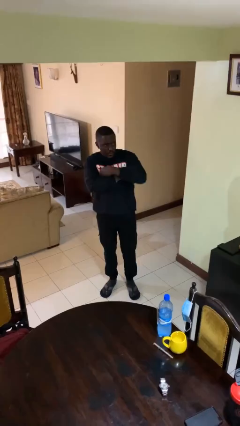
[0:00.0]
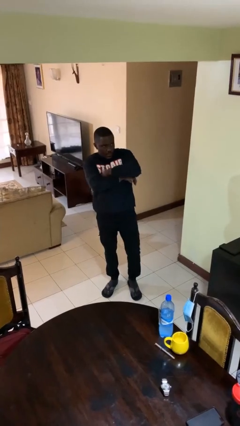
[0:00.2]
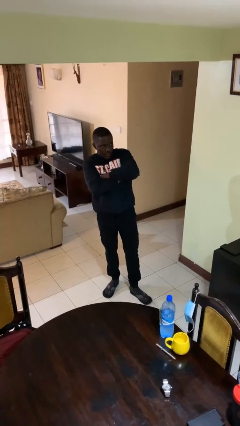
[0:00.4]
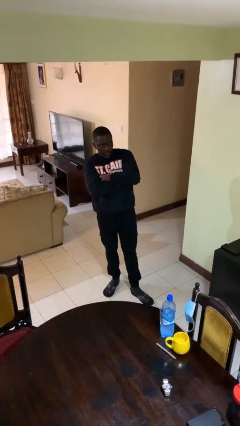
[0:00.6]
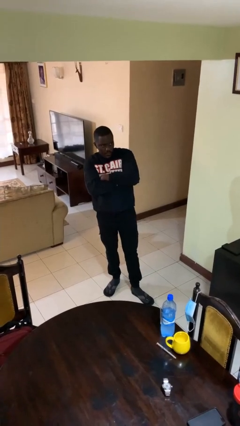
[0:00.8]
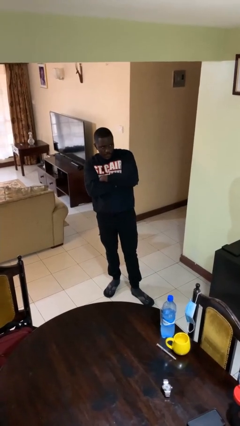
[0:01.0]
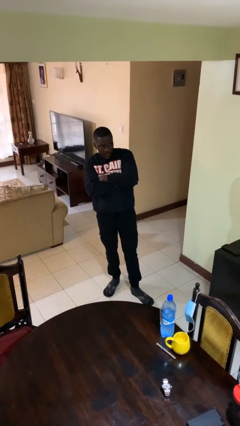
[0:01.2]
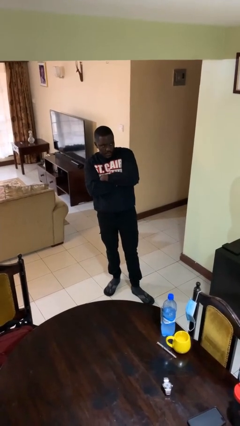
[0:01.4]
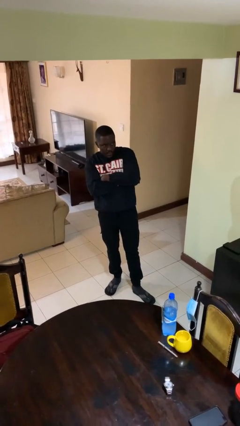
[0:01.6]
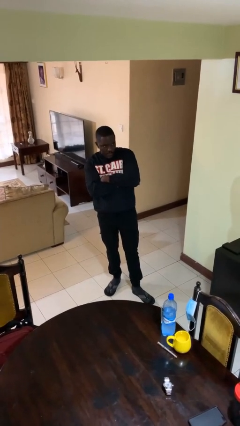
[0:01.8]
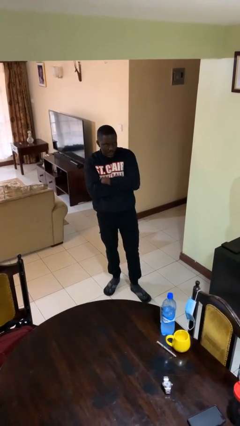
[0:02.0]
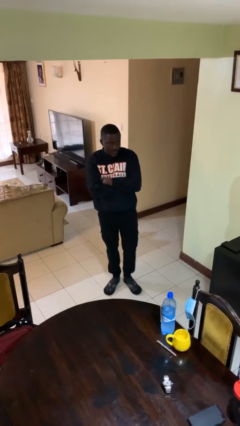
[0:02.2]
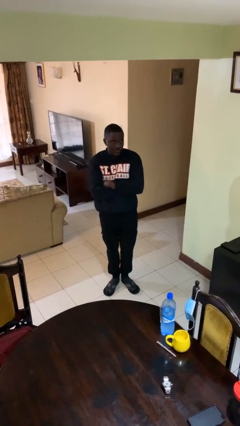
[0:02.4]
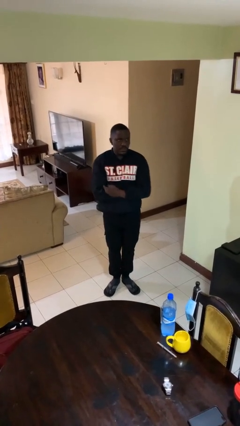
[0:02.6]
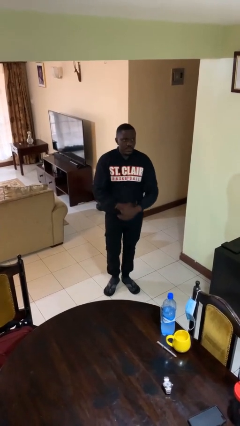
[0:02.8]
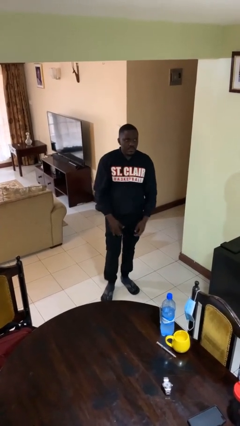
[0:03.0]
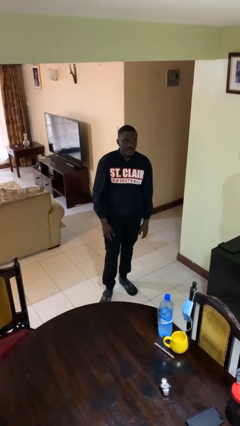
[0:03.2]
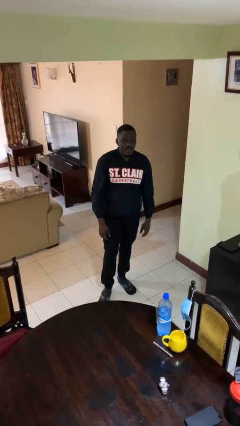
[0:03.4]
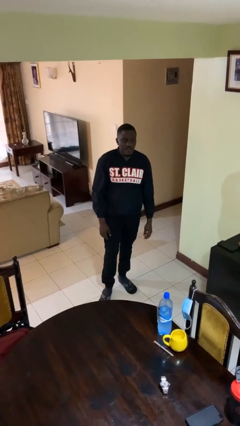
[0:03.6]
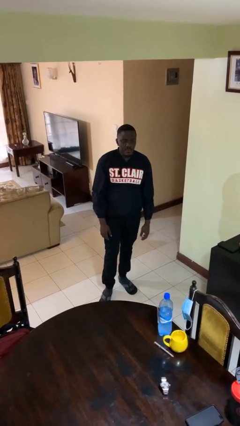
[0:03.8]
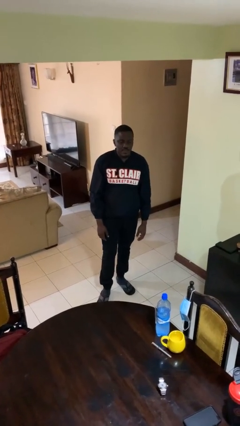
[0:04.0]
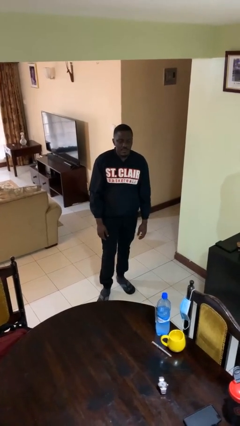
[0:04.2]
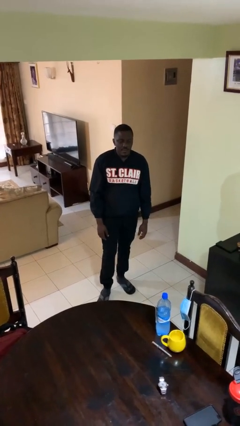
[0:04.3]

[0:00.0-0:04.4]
person crosses arms

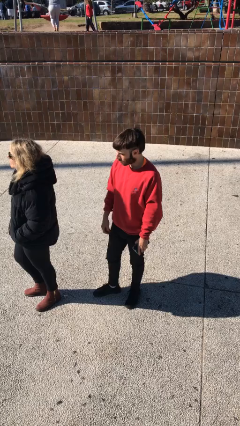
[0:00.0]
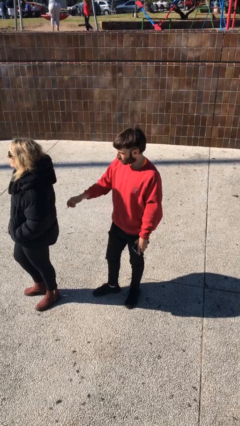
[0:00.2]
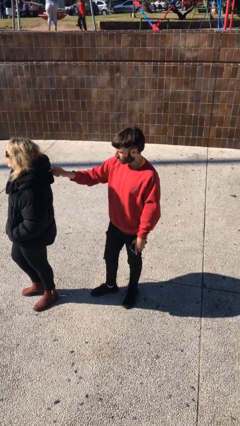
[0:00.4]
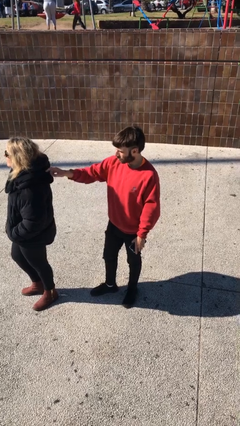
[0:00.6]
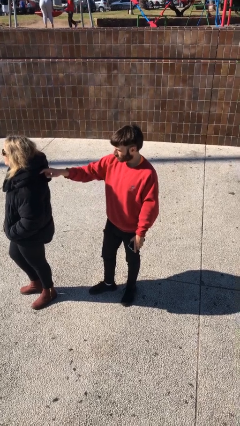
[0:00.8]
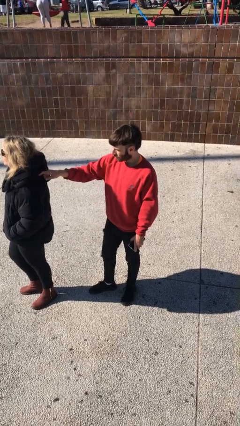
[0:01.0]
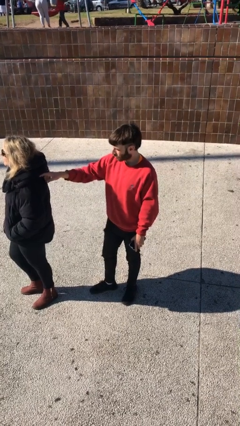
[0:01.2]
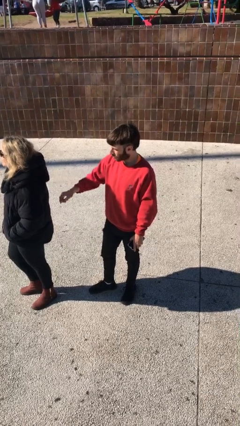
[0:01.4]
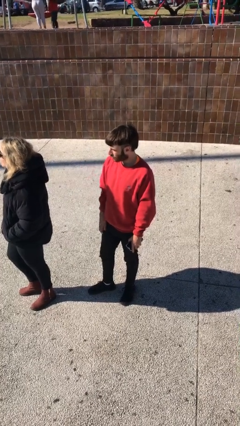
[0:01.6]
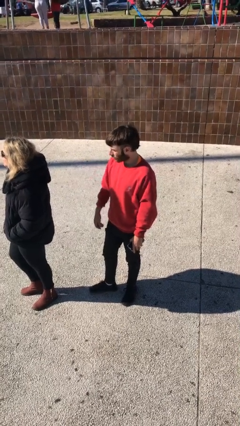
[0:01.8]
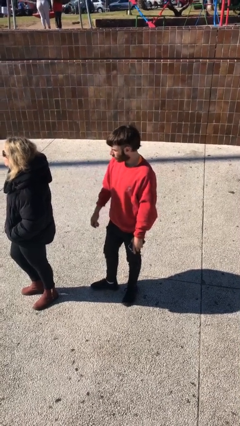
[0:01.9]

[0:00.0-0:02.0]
person touches back of person

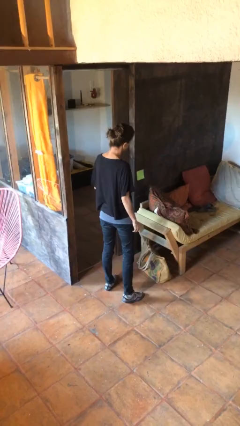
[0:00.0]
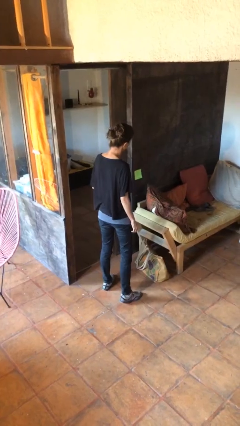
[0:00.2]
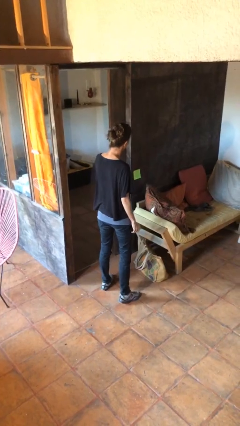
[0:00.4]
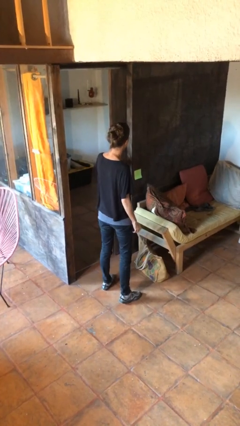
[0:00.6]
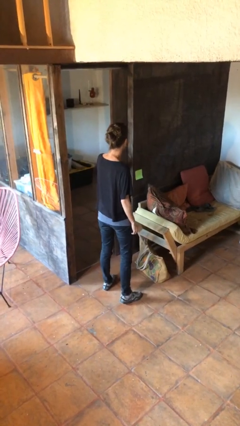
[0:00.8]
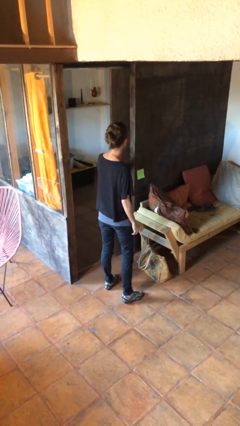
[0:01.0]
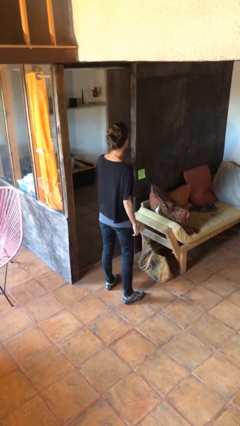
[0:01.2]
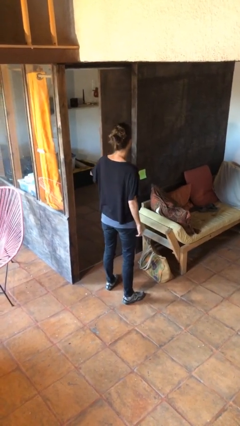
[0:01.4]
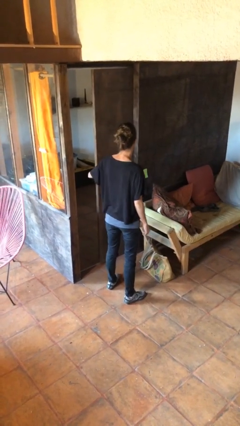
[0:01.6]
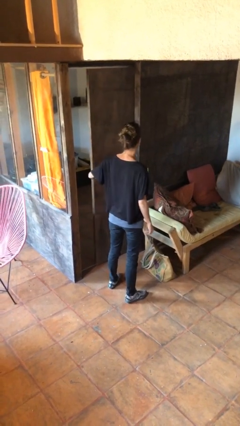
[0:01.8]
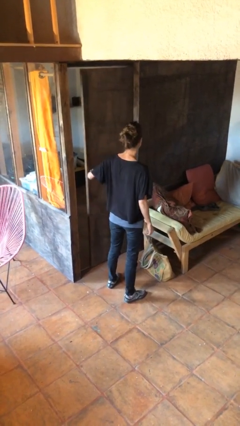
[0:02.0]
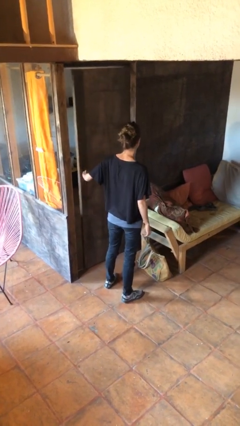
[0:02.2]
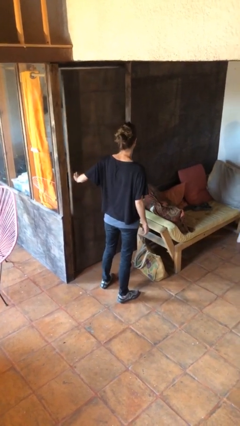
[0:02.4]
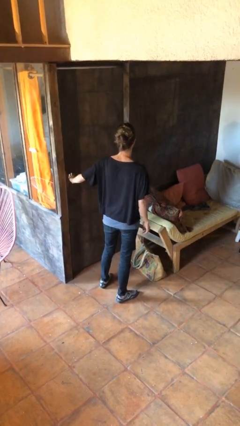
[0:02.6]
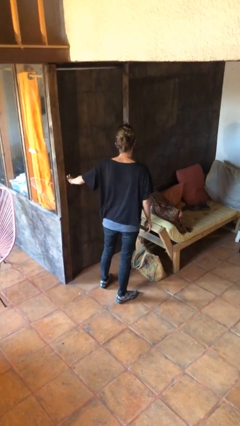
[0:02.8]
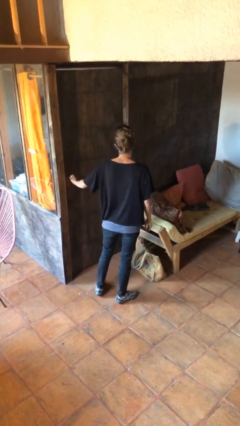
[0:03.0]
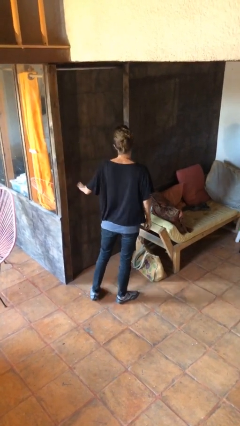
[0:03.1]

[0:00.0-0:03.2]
person closes sliding door

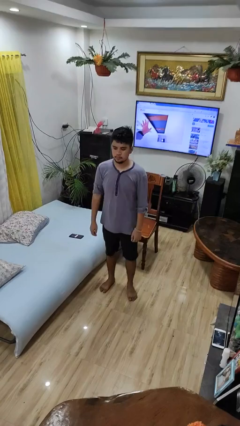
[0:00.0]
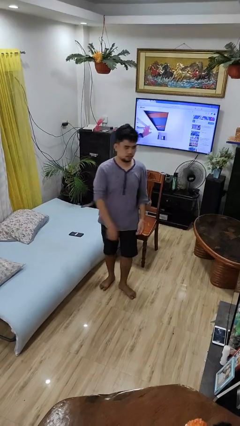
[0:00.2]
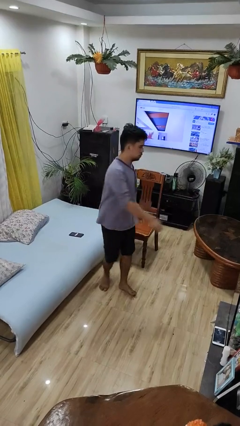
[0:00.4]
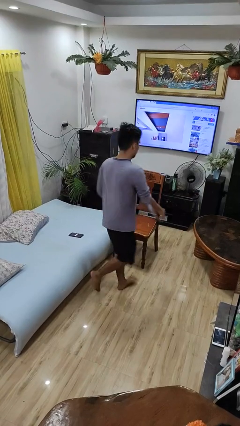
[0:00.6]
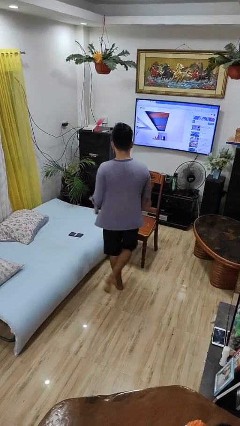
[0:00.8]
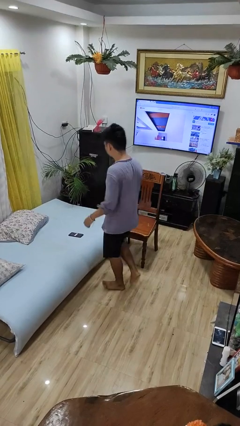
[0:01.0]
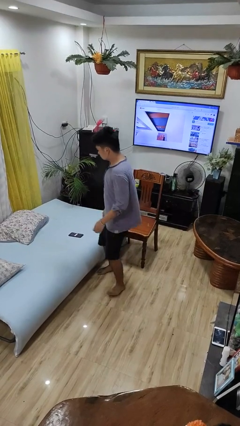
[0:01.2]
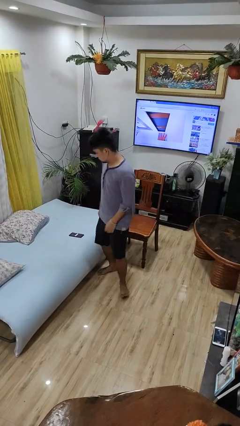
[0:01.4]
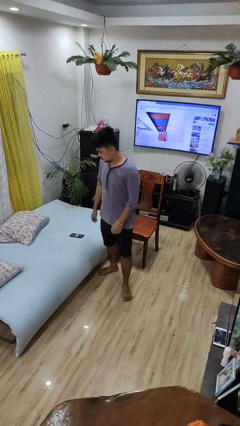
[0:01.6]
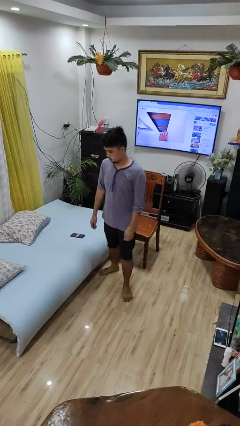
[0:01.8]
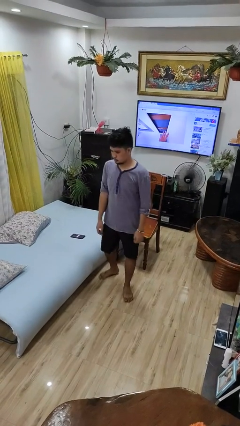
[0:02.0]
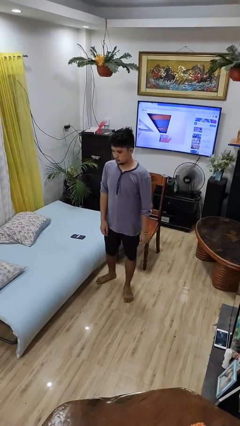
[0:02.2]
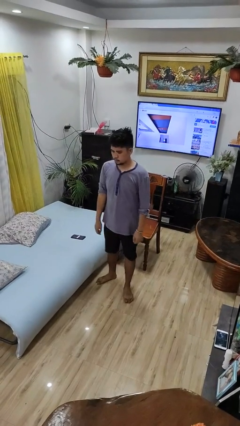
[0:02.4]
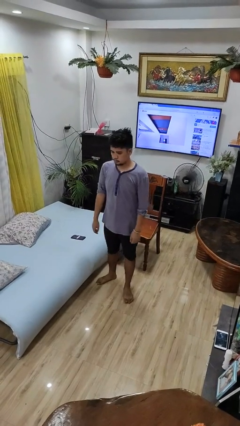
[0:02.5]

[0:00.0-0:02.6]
person twirls

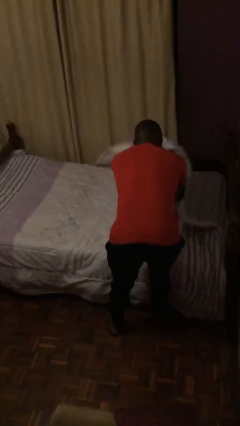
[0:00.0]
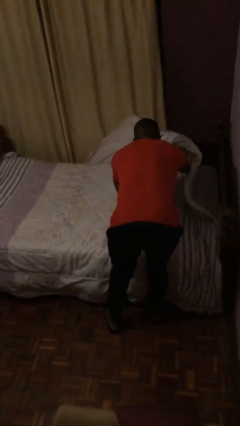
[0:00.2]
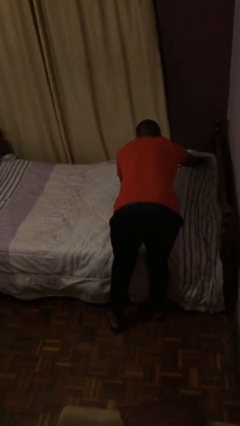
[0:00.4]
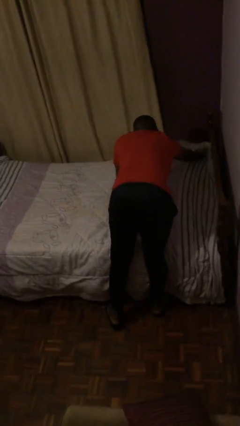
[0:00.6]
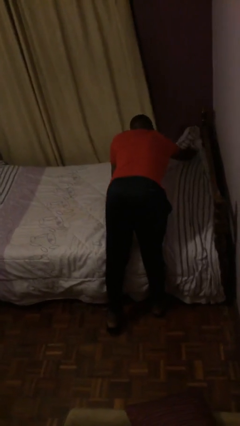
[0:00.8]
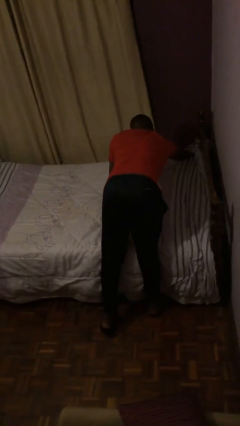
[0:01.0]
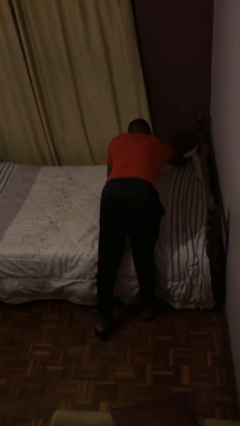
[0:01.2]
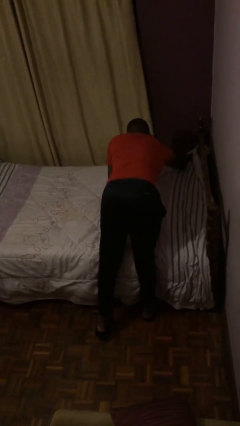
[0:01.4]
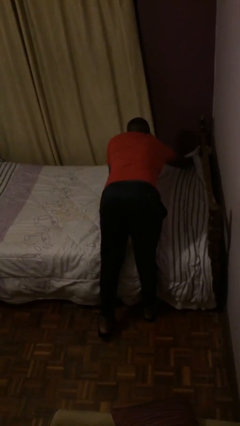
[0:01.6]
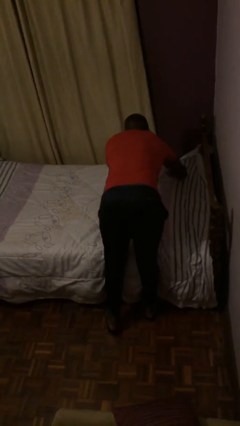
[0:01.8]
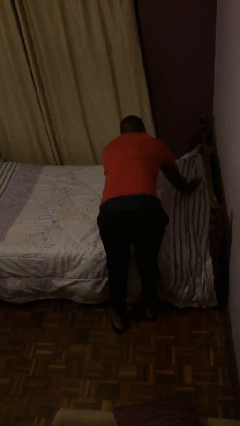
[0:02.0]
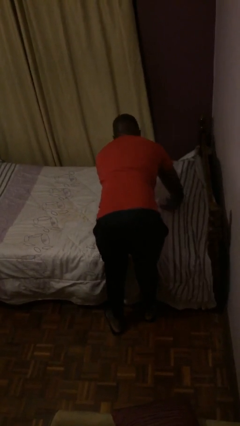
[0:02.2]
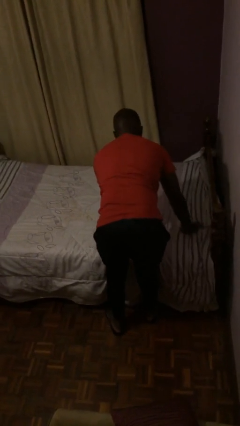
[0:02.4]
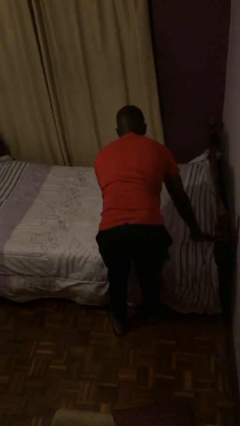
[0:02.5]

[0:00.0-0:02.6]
person makes bed

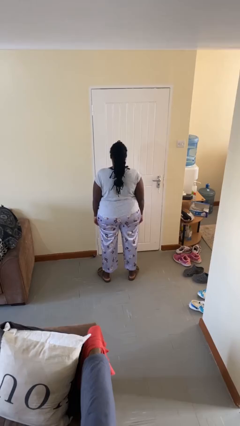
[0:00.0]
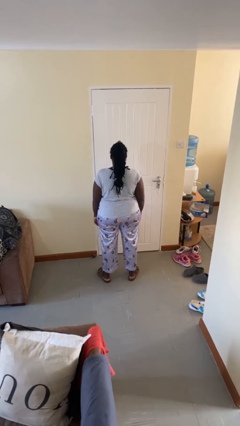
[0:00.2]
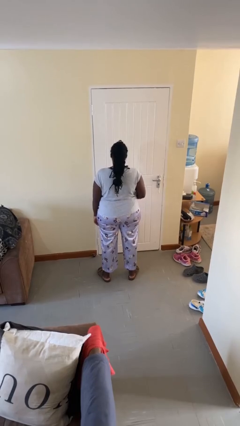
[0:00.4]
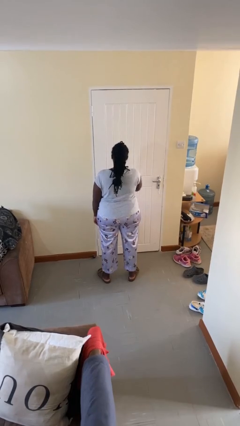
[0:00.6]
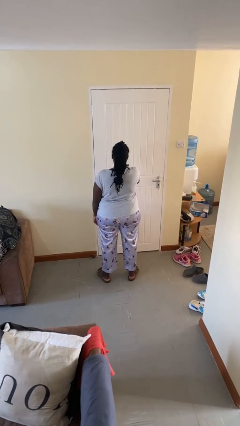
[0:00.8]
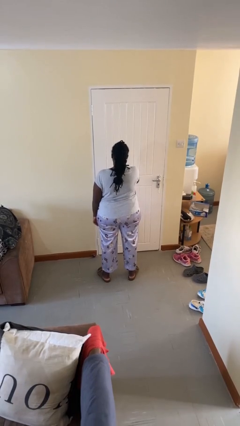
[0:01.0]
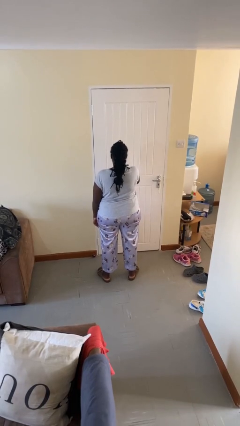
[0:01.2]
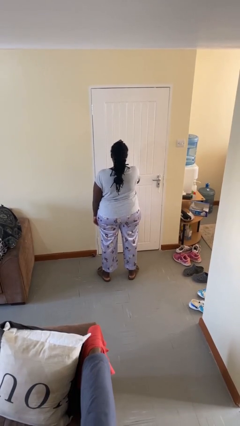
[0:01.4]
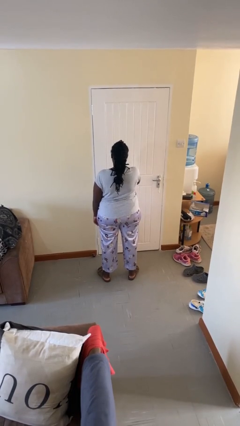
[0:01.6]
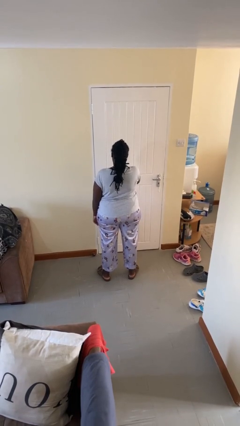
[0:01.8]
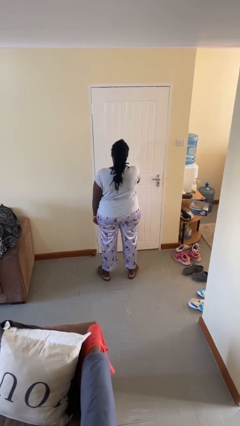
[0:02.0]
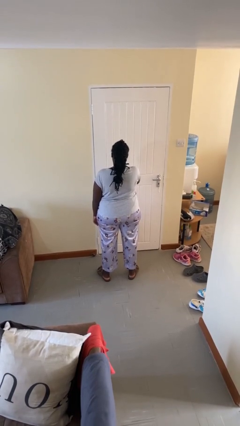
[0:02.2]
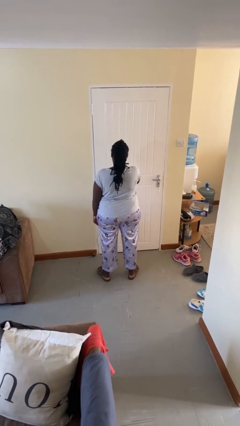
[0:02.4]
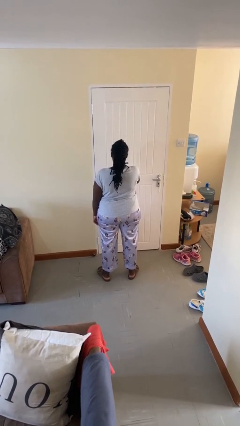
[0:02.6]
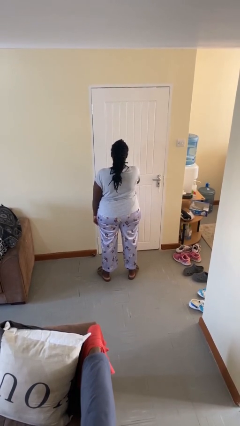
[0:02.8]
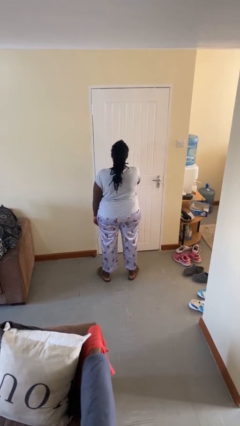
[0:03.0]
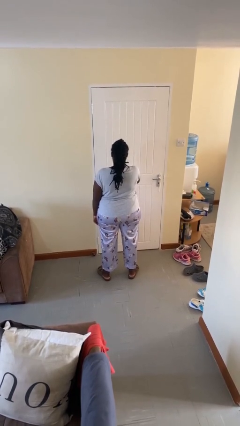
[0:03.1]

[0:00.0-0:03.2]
person scratches face
